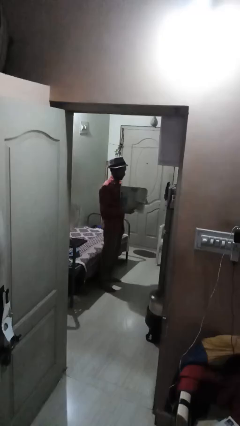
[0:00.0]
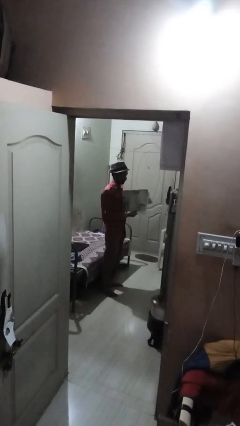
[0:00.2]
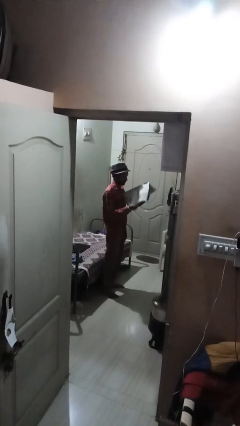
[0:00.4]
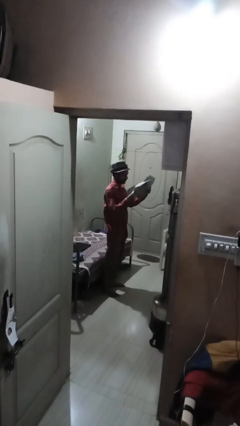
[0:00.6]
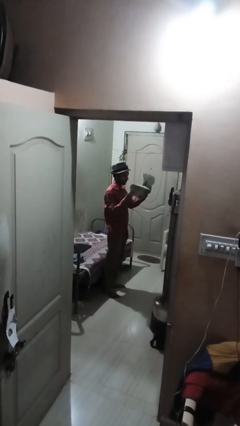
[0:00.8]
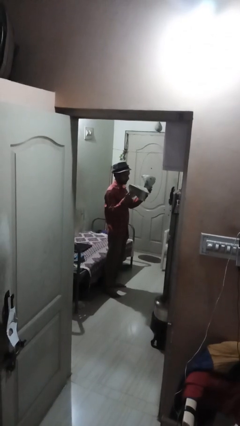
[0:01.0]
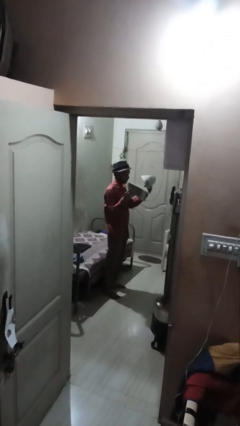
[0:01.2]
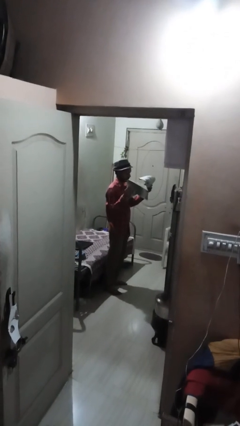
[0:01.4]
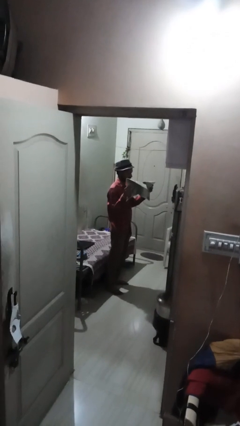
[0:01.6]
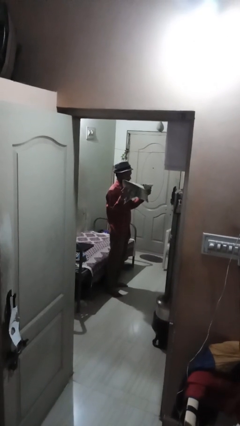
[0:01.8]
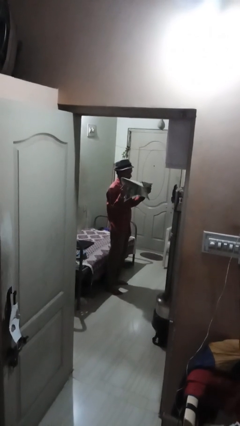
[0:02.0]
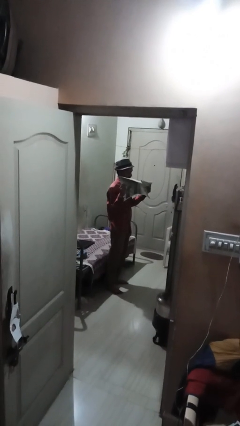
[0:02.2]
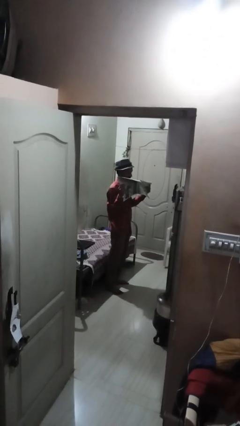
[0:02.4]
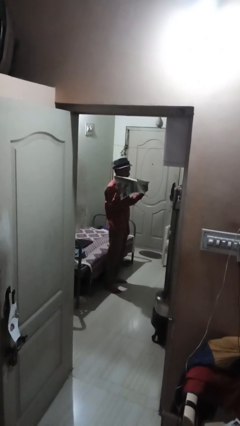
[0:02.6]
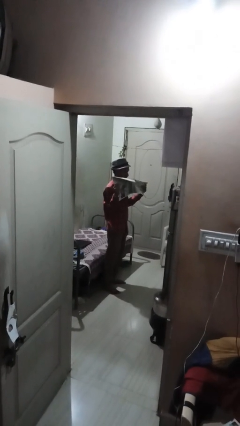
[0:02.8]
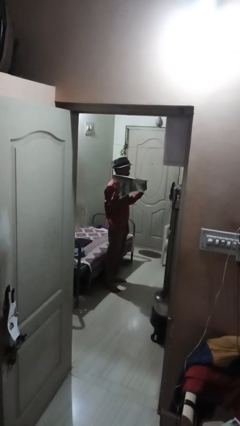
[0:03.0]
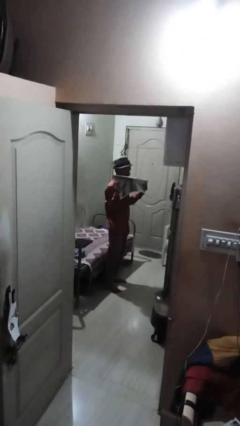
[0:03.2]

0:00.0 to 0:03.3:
person tears paper

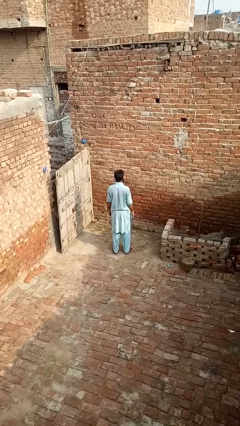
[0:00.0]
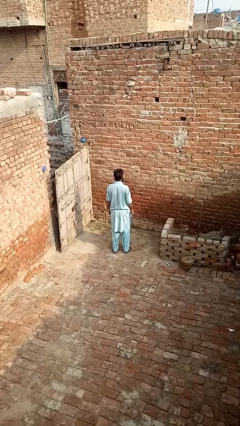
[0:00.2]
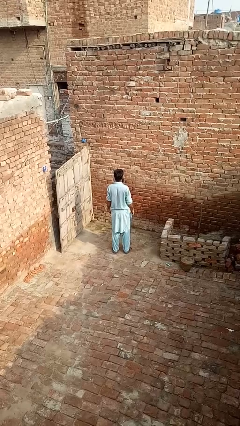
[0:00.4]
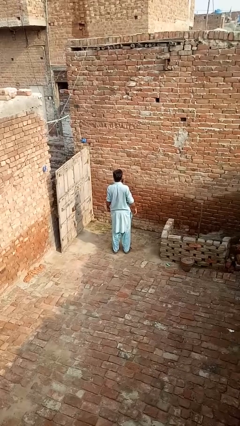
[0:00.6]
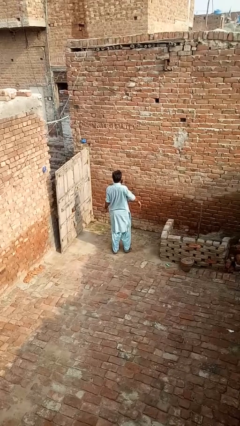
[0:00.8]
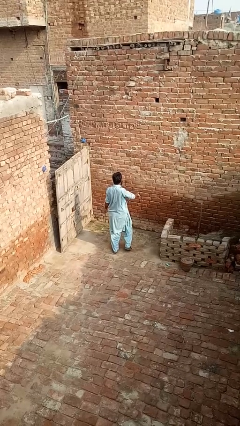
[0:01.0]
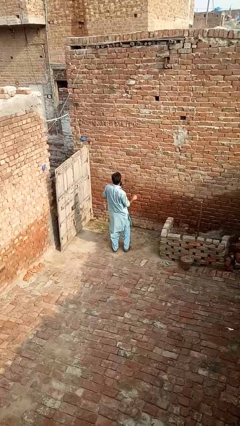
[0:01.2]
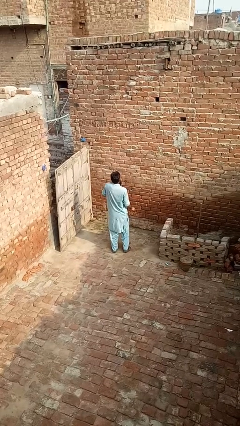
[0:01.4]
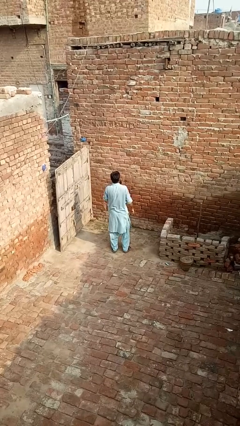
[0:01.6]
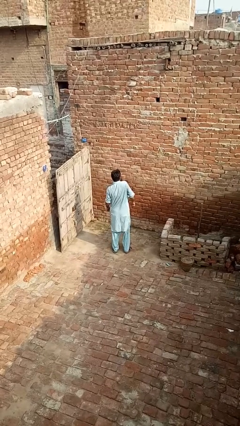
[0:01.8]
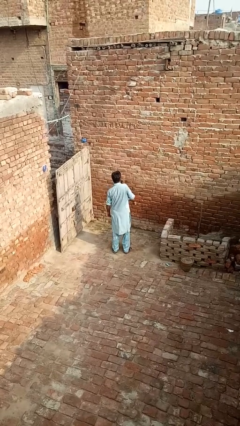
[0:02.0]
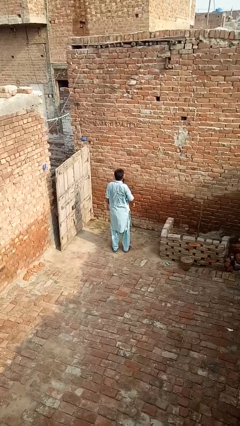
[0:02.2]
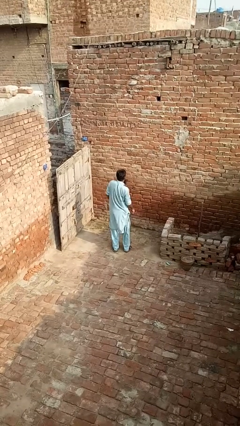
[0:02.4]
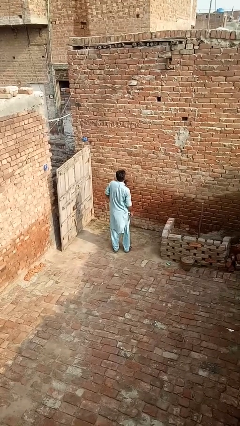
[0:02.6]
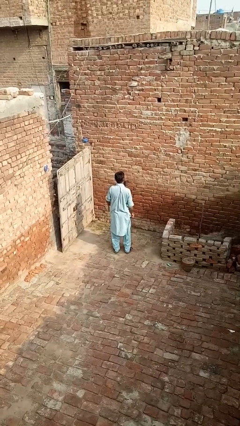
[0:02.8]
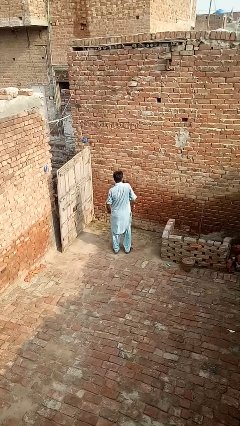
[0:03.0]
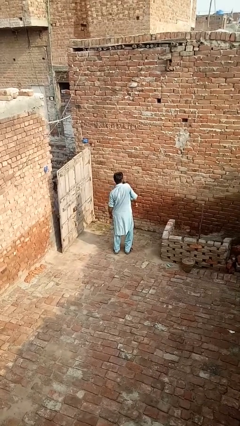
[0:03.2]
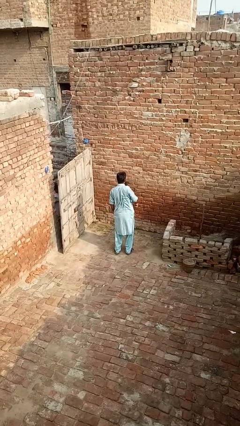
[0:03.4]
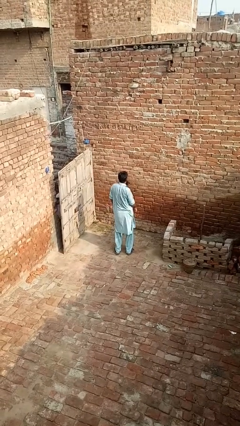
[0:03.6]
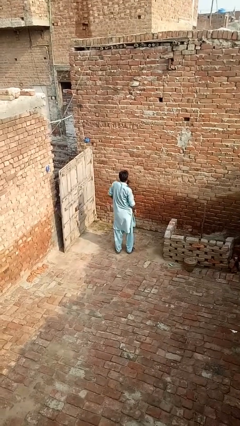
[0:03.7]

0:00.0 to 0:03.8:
person dances in place

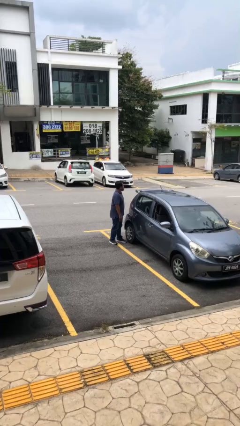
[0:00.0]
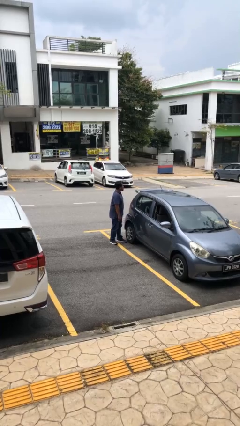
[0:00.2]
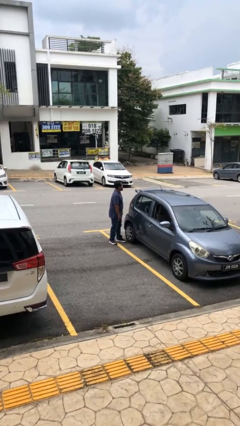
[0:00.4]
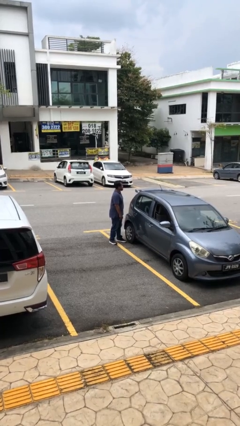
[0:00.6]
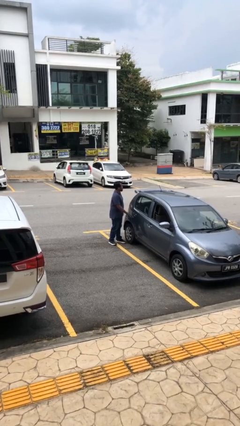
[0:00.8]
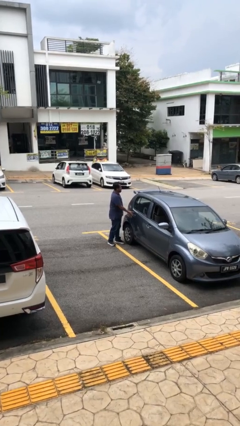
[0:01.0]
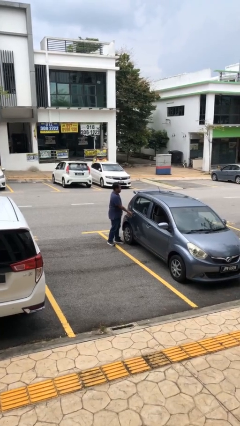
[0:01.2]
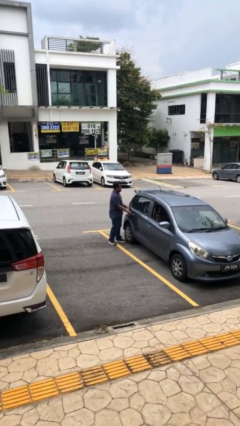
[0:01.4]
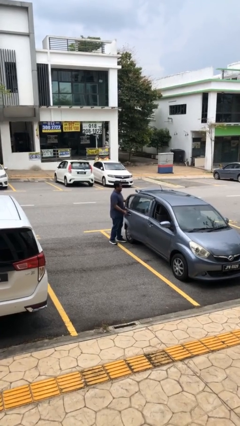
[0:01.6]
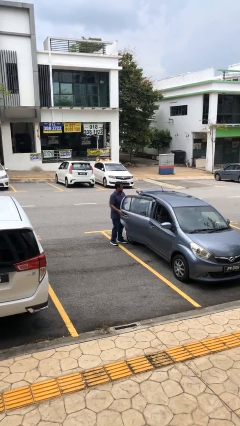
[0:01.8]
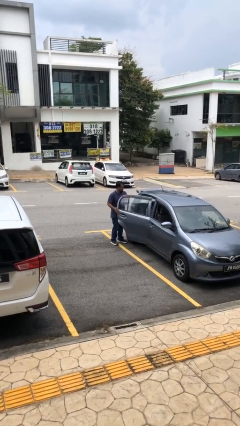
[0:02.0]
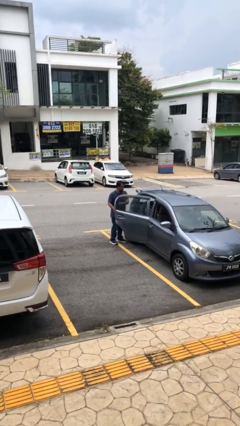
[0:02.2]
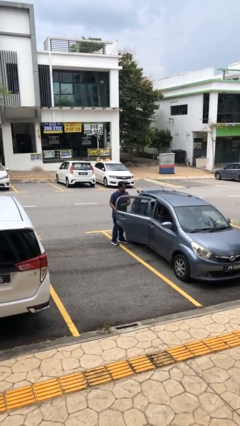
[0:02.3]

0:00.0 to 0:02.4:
person opens car door

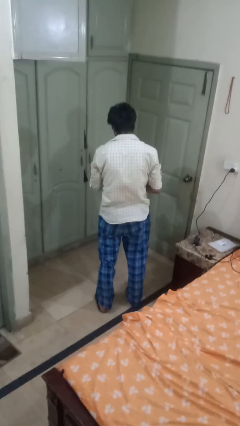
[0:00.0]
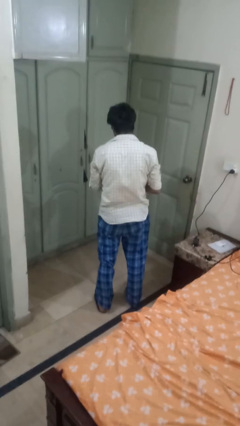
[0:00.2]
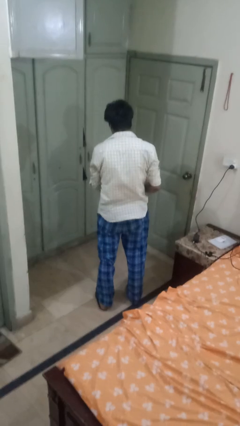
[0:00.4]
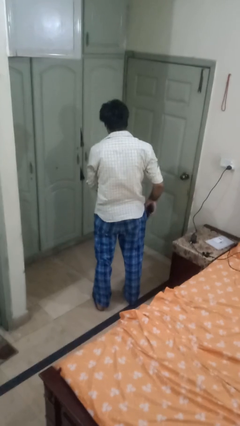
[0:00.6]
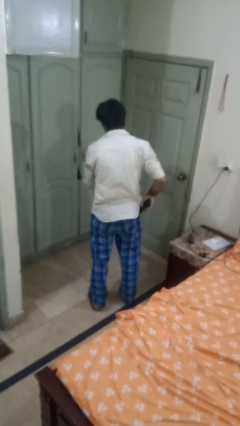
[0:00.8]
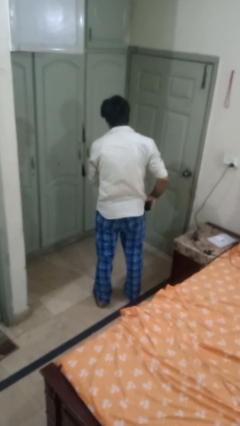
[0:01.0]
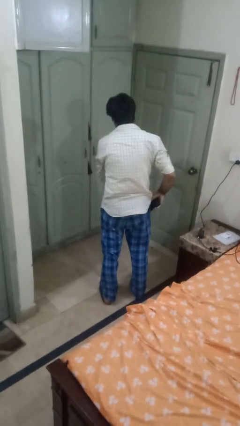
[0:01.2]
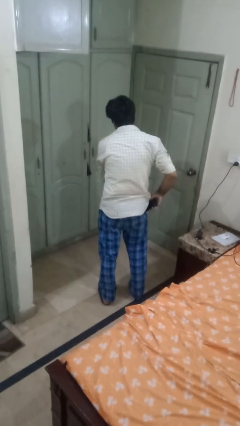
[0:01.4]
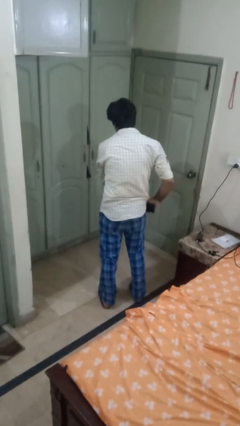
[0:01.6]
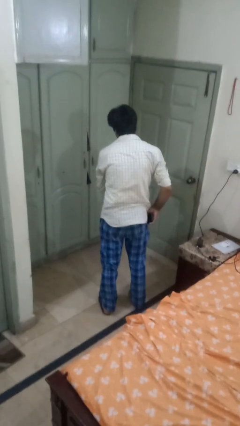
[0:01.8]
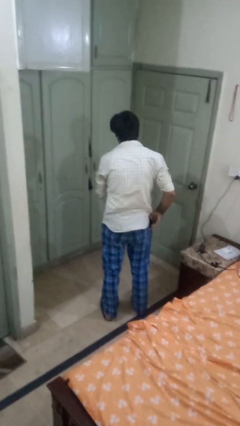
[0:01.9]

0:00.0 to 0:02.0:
person puts phone into pocket

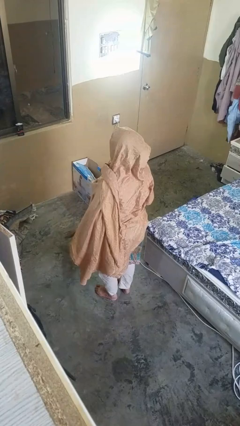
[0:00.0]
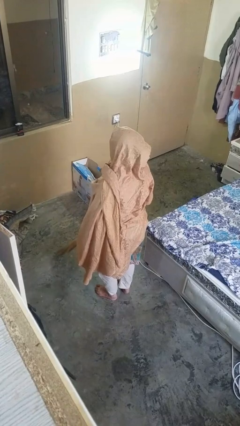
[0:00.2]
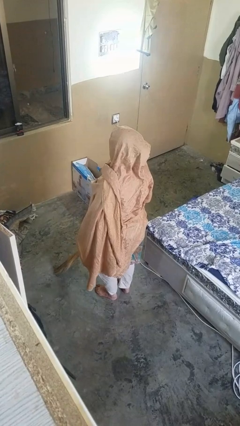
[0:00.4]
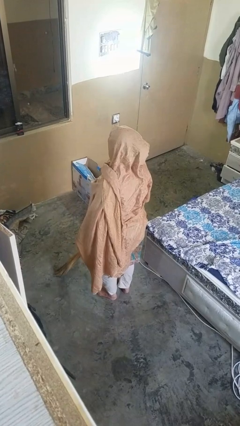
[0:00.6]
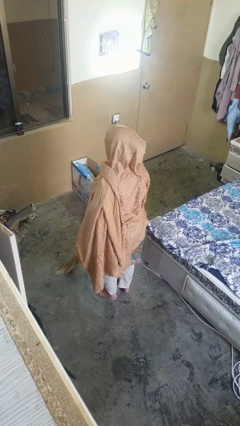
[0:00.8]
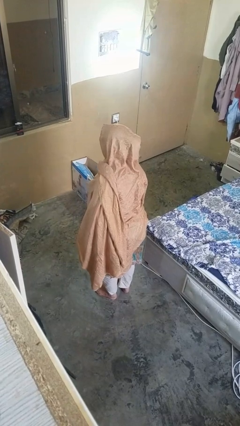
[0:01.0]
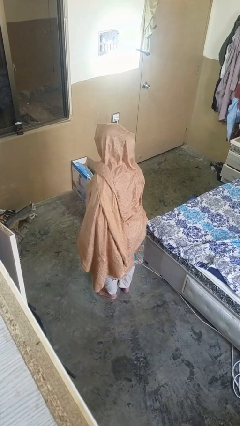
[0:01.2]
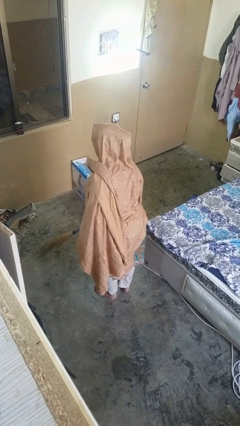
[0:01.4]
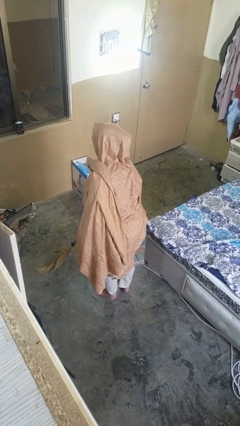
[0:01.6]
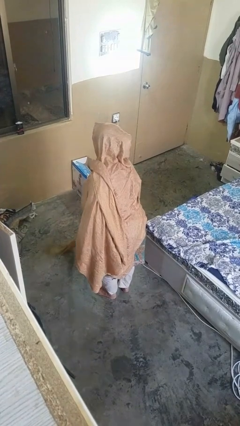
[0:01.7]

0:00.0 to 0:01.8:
person sweeps floor

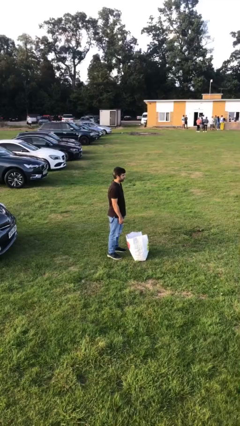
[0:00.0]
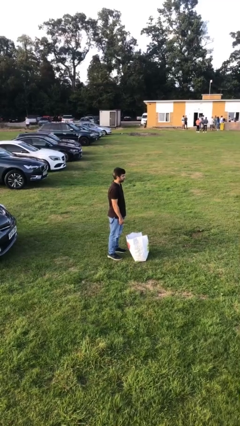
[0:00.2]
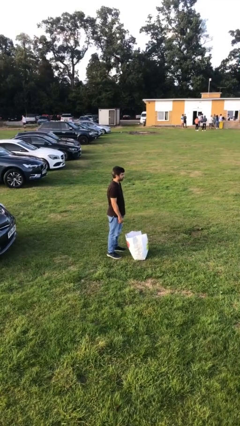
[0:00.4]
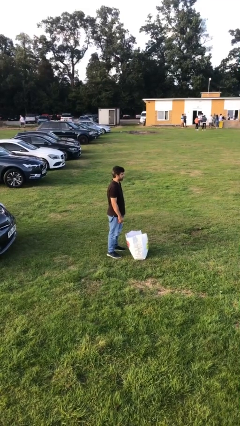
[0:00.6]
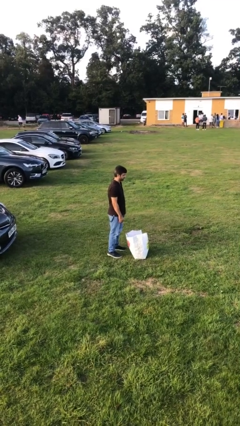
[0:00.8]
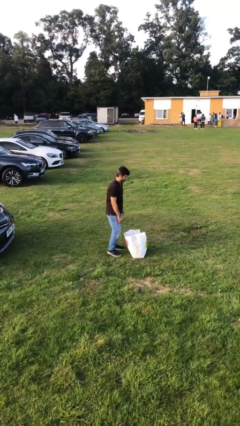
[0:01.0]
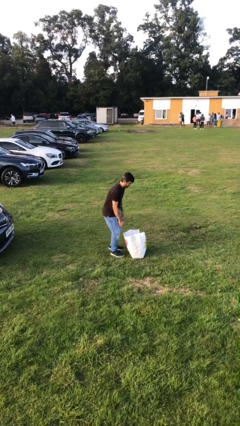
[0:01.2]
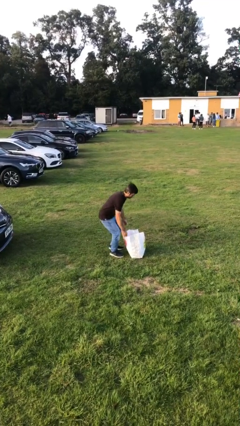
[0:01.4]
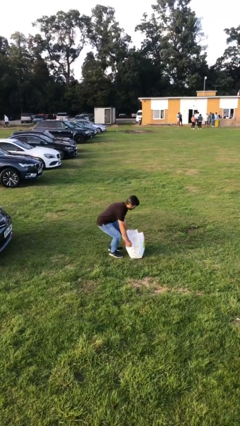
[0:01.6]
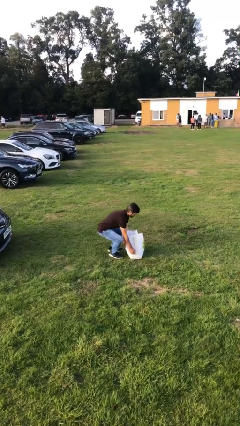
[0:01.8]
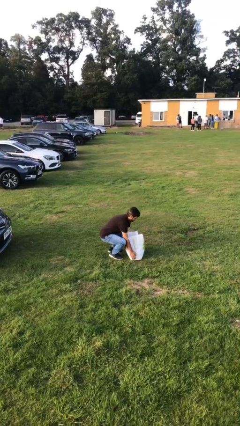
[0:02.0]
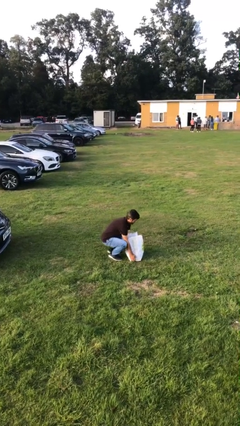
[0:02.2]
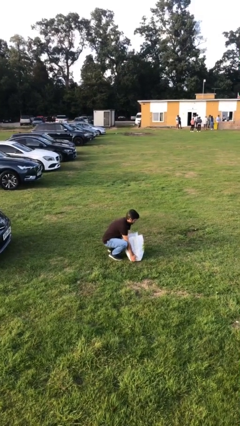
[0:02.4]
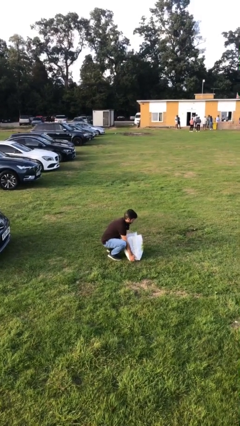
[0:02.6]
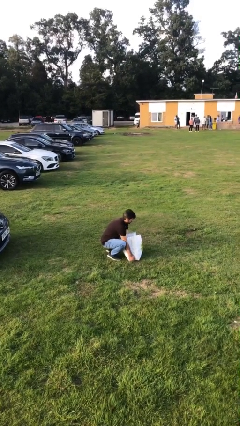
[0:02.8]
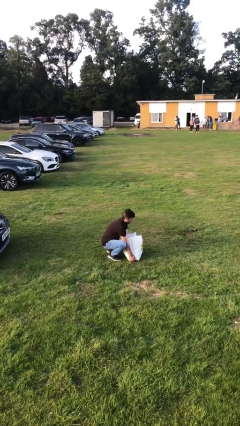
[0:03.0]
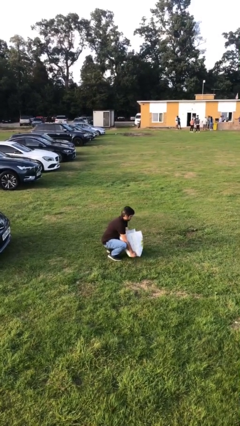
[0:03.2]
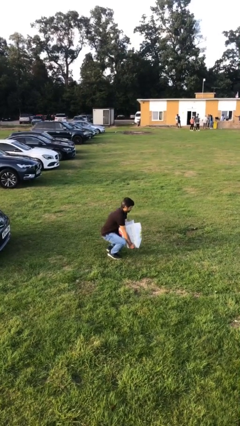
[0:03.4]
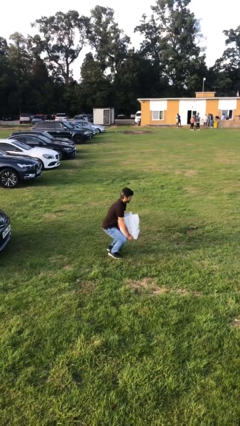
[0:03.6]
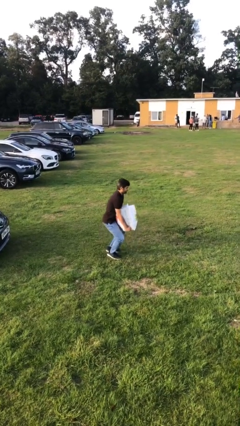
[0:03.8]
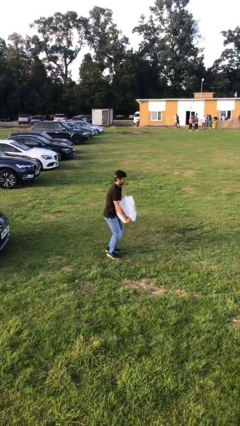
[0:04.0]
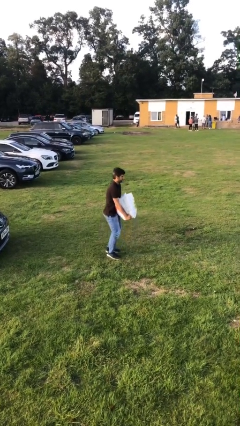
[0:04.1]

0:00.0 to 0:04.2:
person picks up object from floor

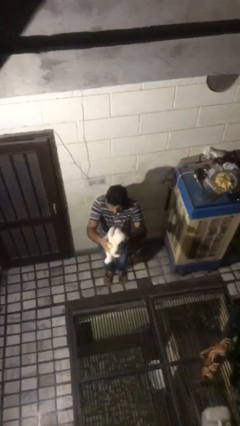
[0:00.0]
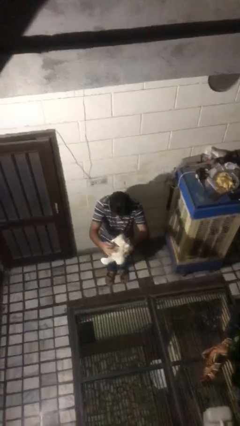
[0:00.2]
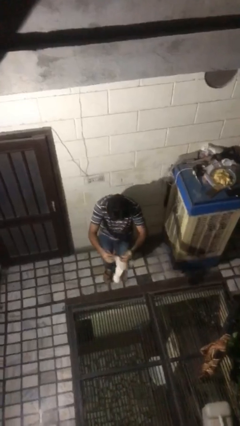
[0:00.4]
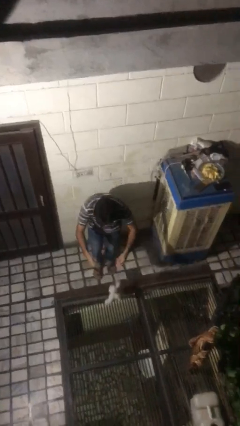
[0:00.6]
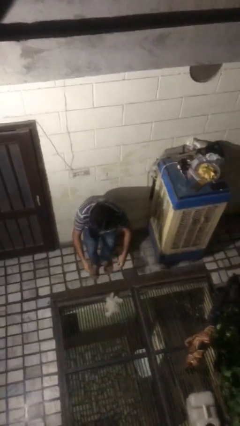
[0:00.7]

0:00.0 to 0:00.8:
person catches dropped object
